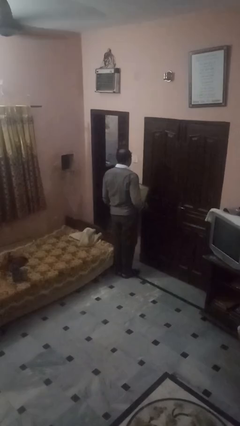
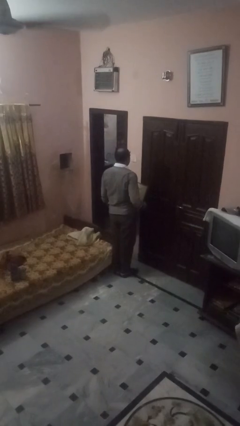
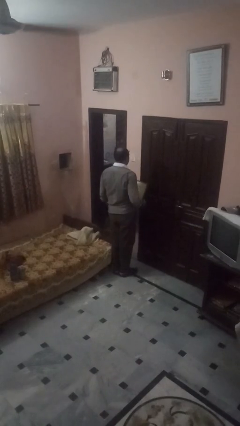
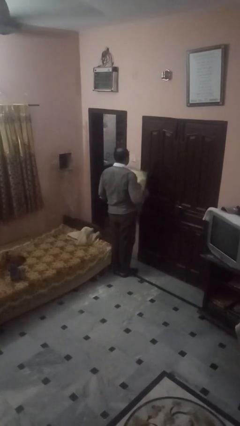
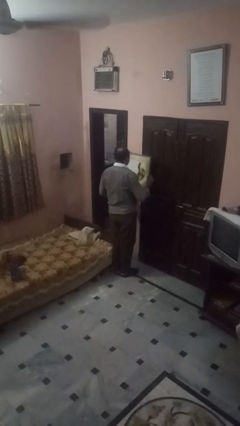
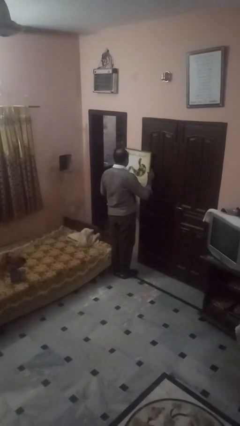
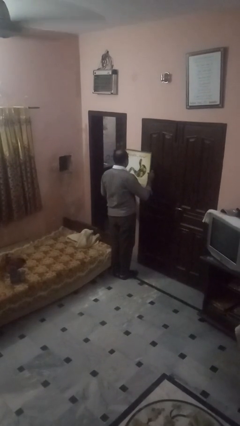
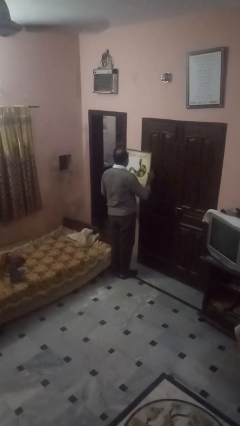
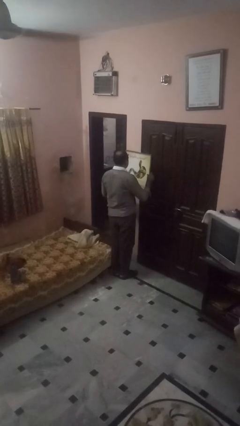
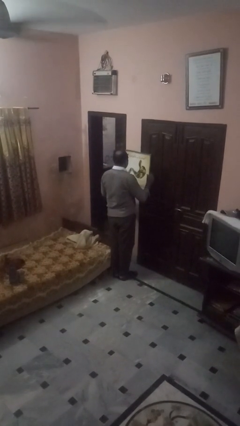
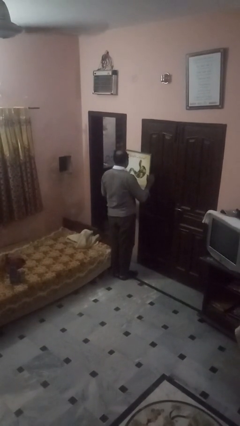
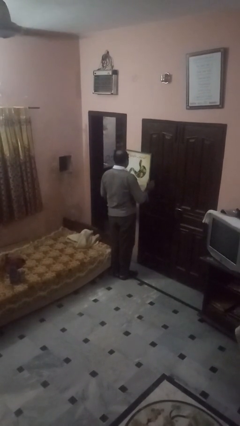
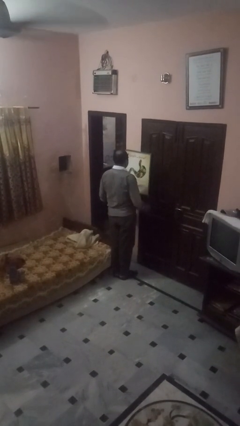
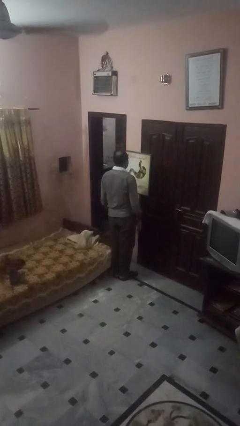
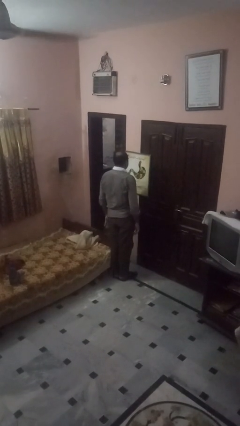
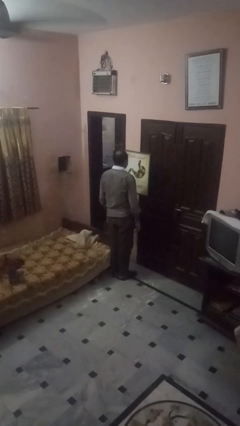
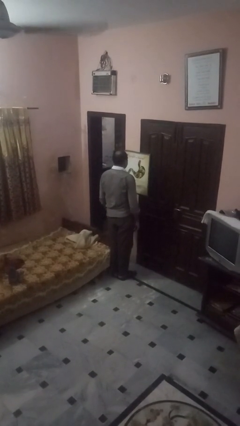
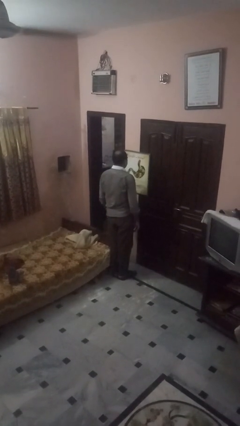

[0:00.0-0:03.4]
person puts up picture frame

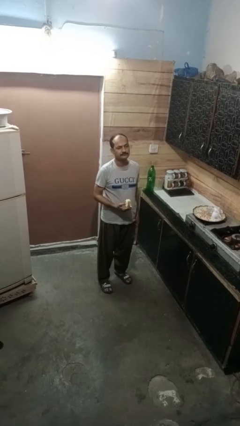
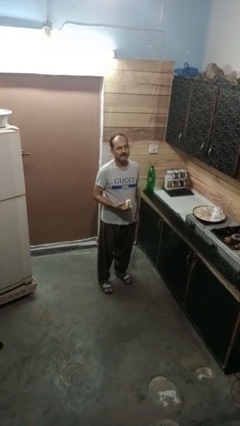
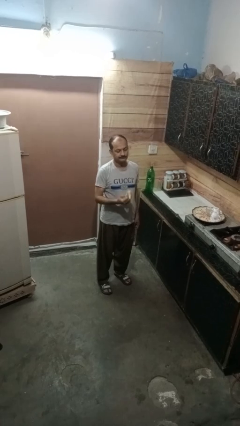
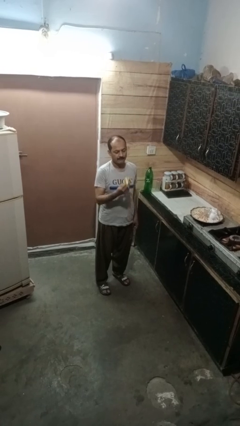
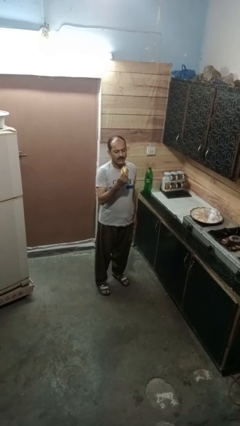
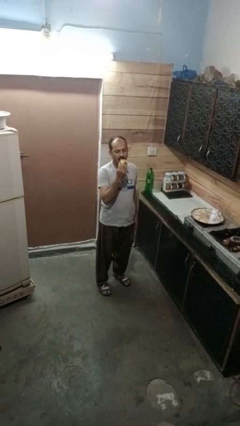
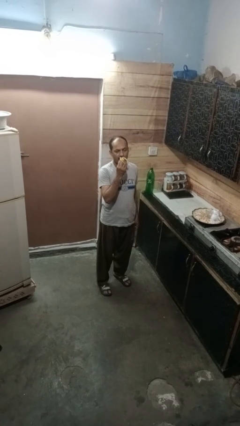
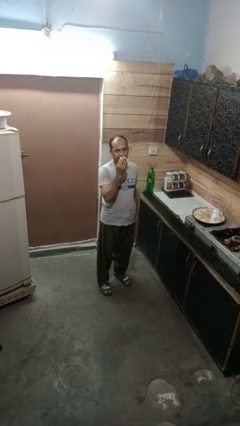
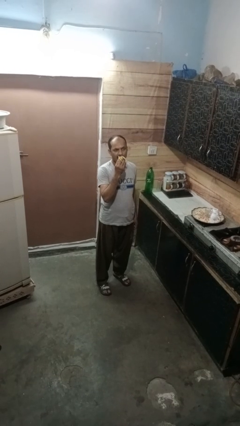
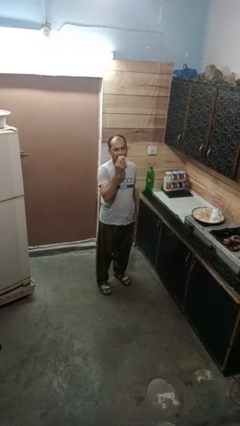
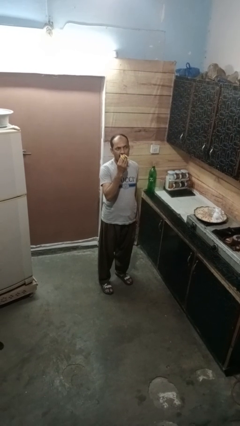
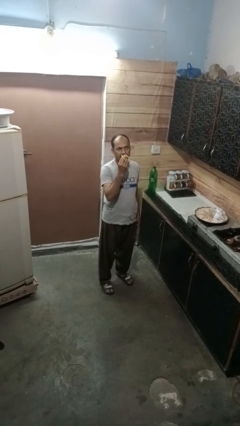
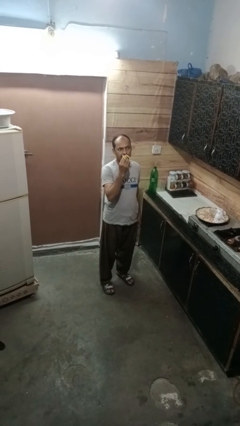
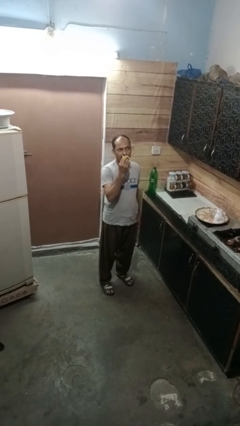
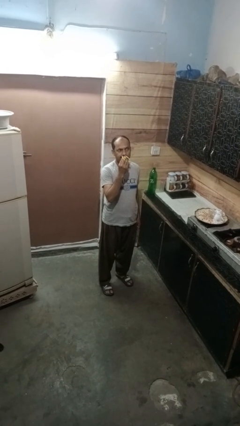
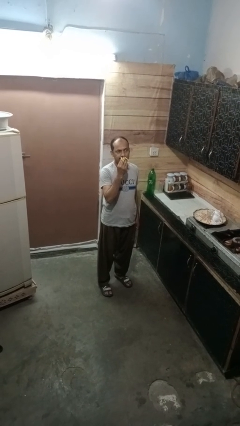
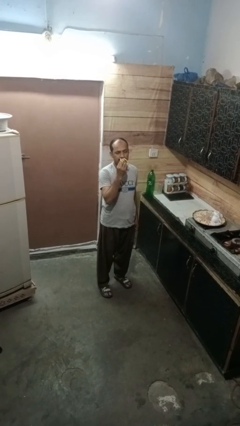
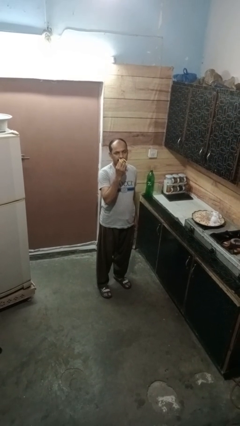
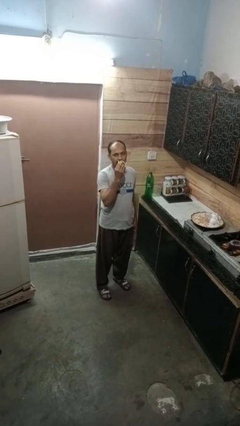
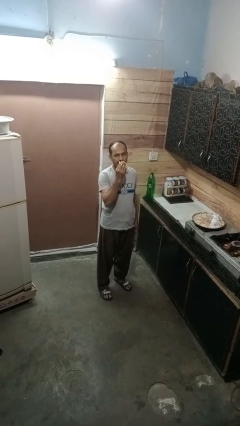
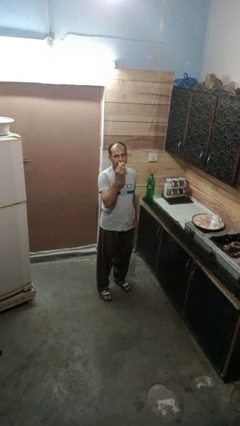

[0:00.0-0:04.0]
person eats banana

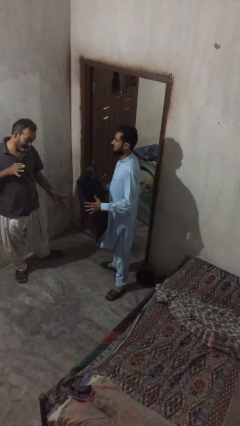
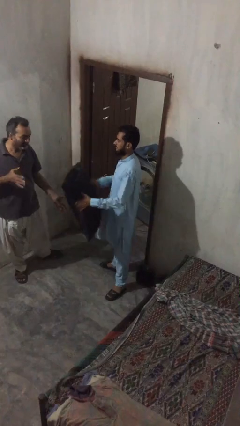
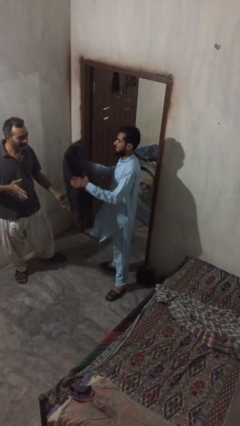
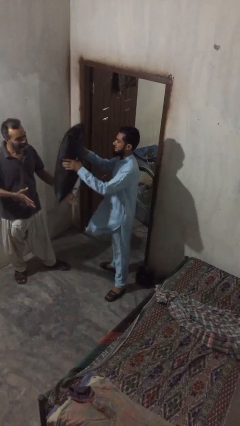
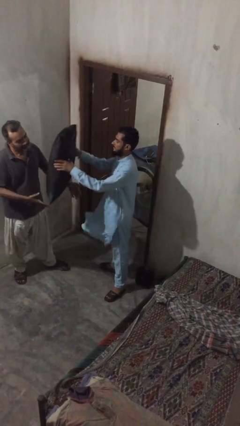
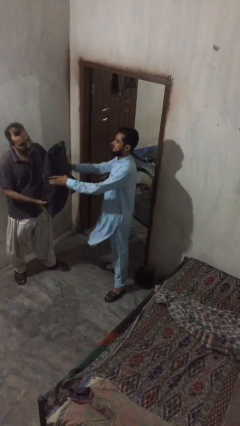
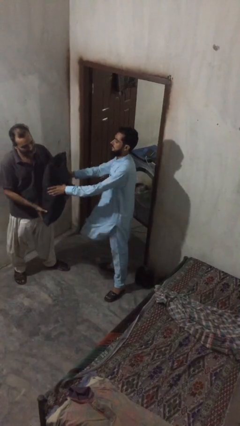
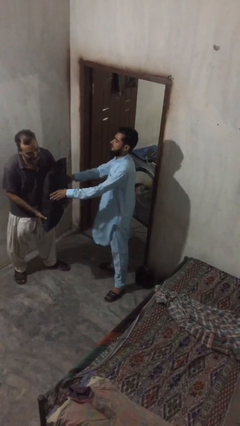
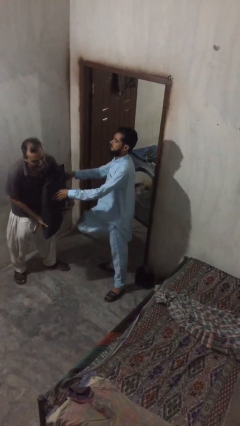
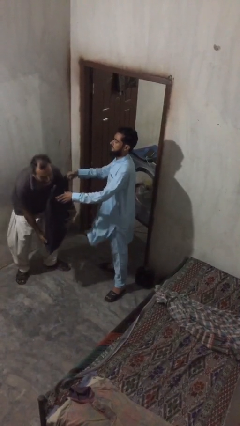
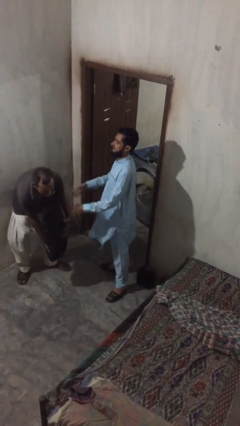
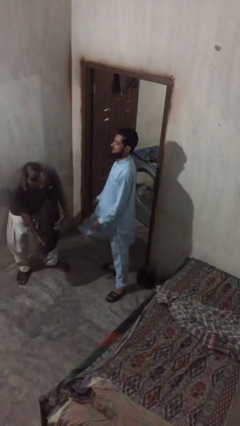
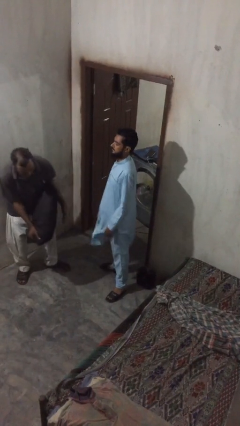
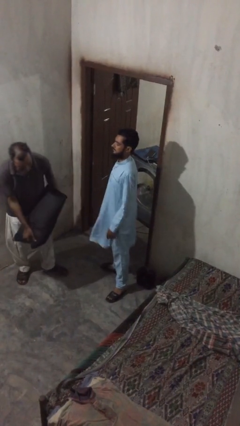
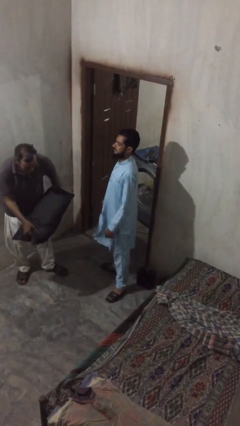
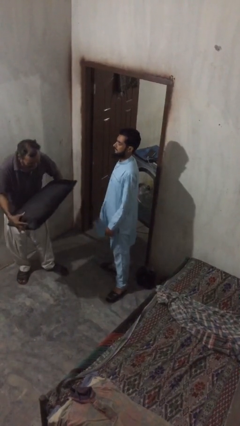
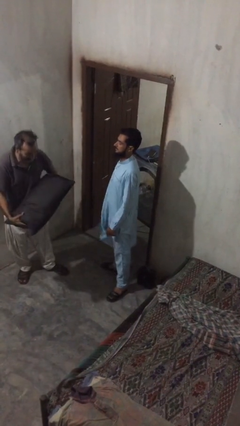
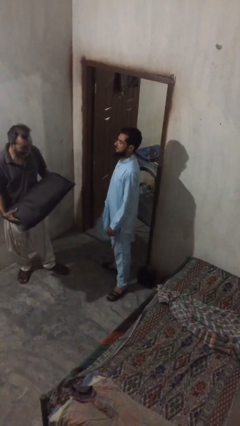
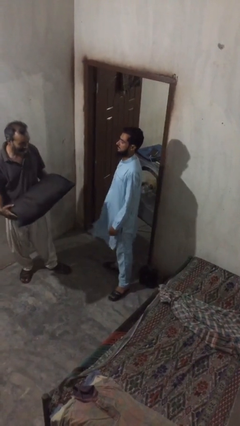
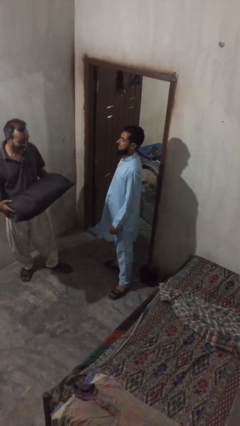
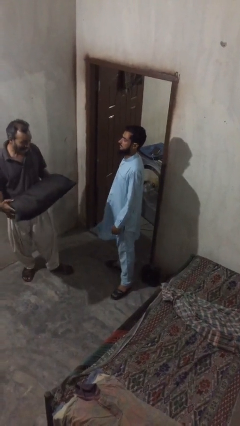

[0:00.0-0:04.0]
person transfers object to person

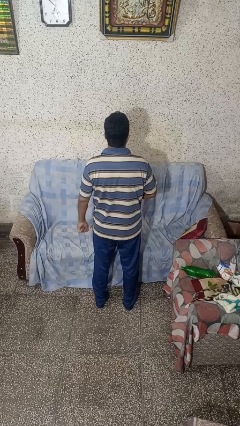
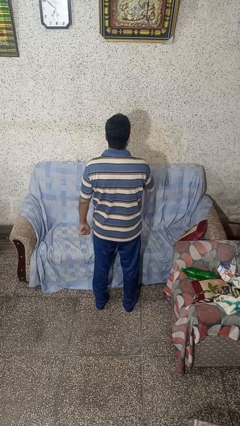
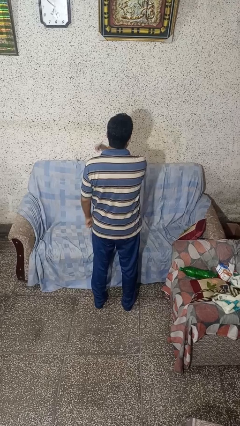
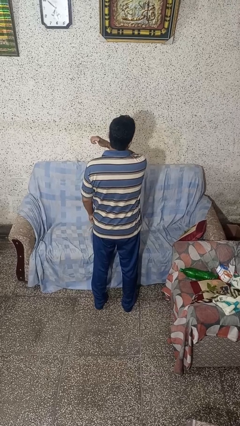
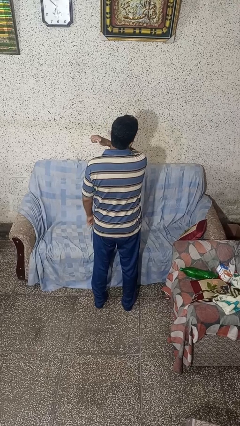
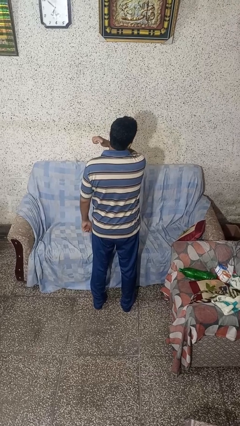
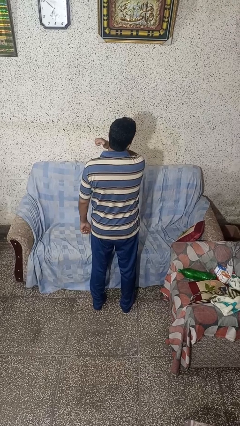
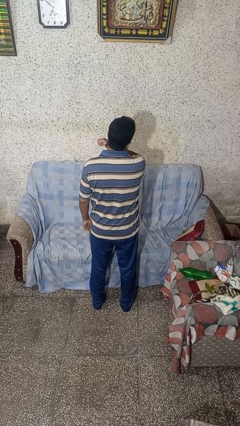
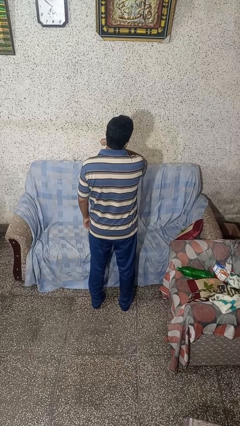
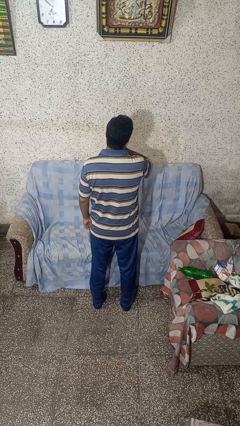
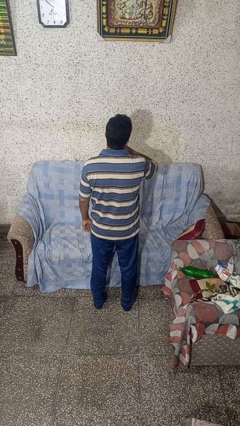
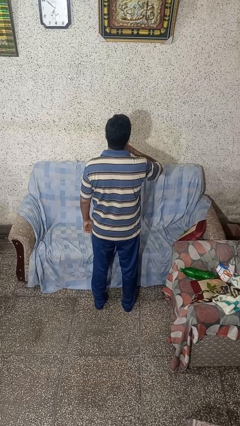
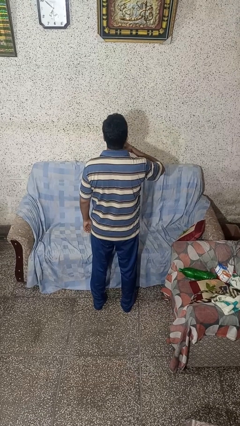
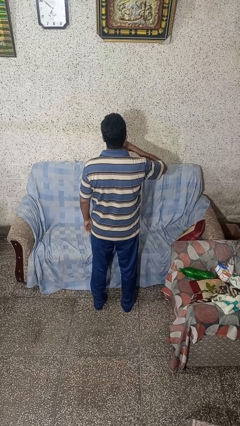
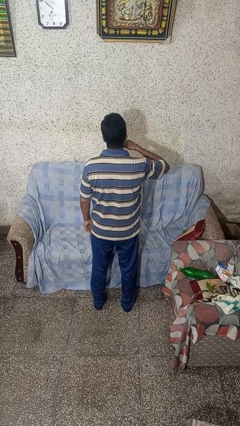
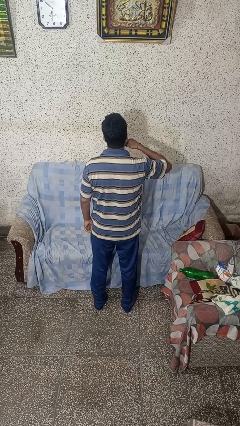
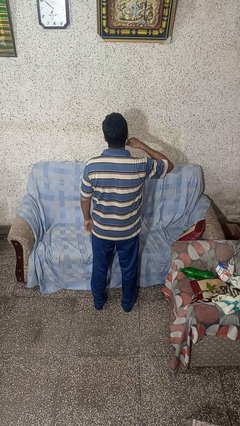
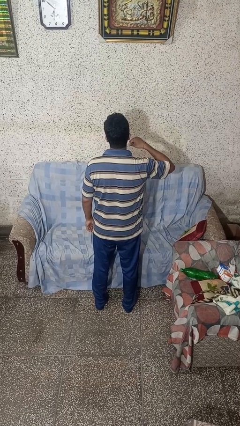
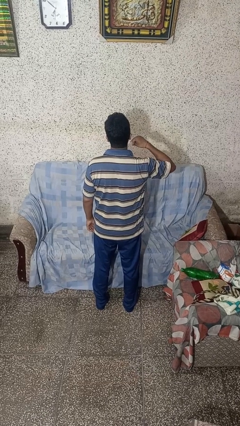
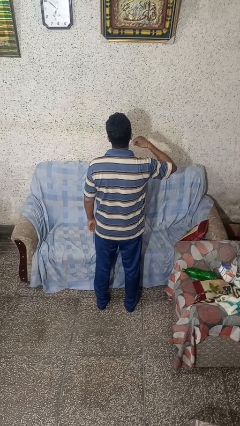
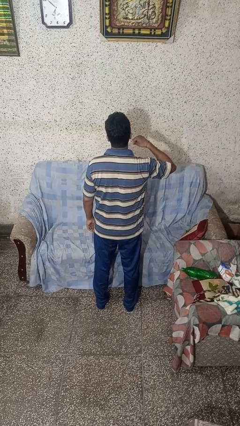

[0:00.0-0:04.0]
person gestures cut

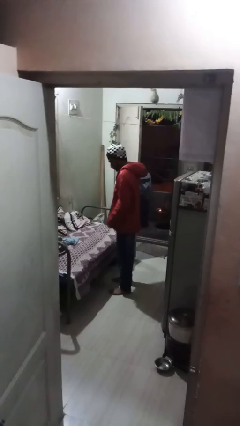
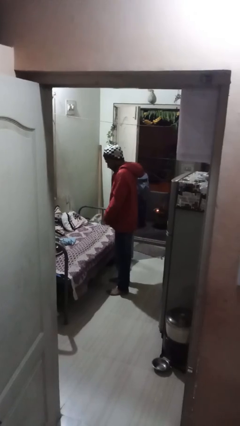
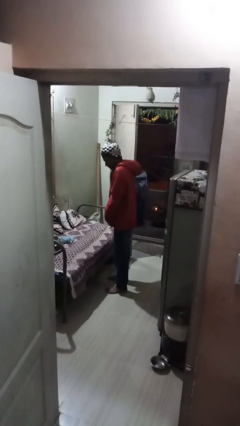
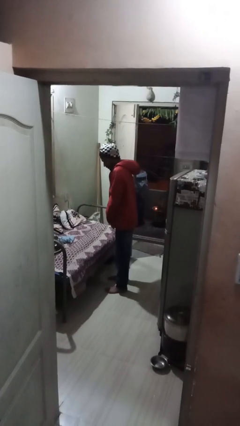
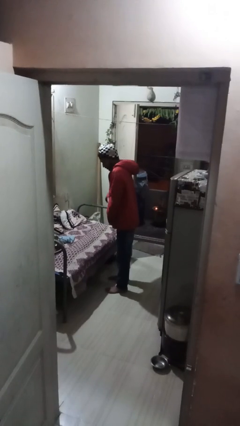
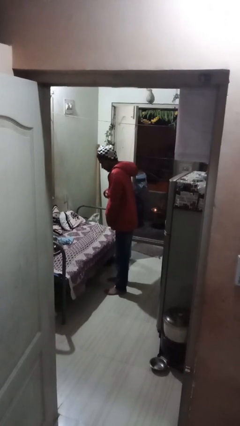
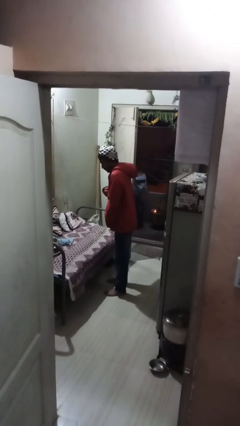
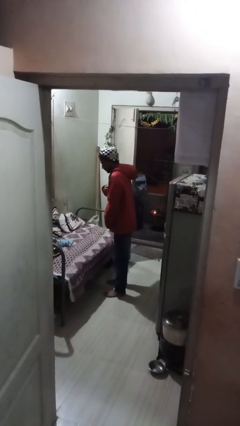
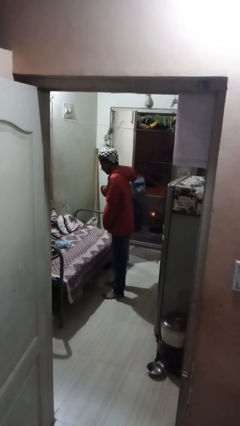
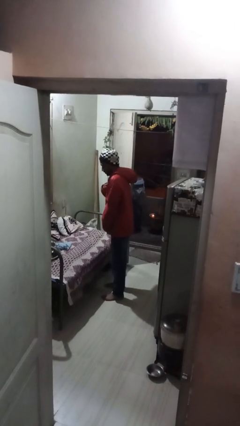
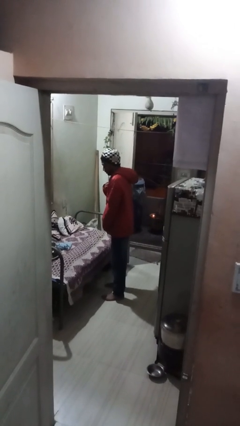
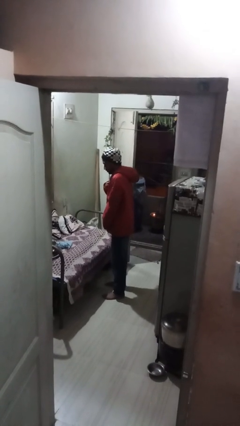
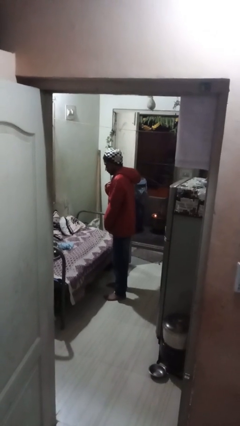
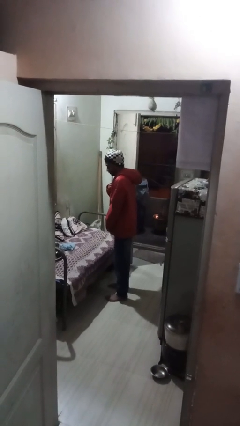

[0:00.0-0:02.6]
person zips up jacket
